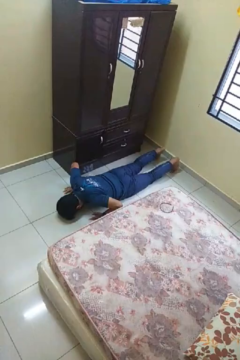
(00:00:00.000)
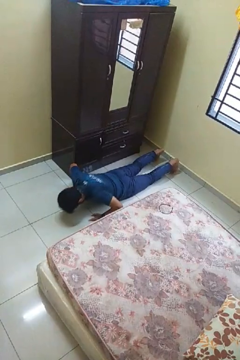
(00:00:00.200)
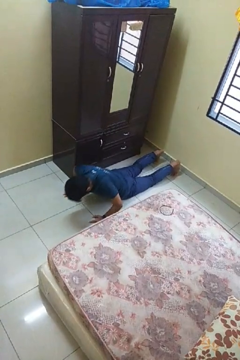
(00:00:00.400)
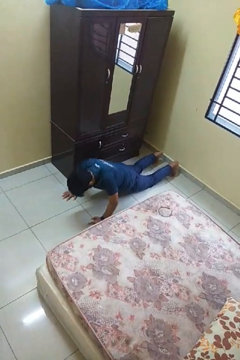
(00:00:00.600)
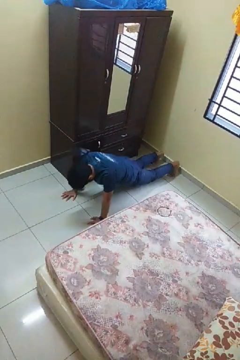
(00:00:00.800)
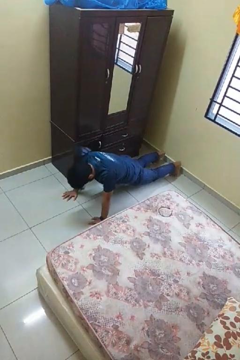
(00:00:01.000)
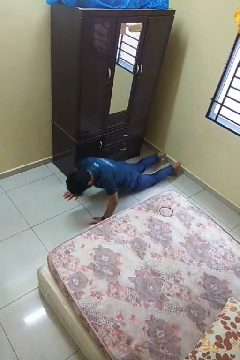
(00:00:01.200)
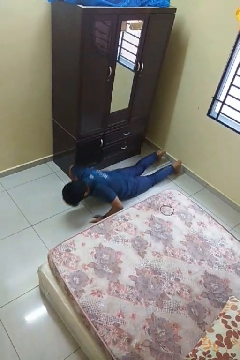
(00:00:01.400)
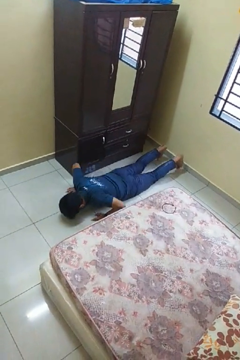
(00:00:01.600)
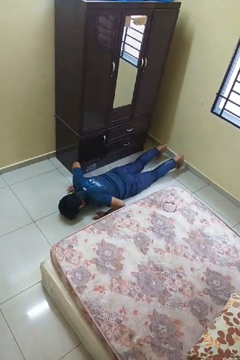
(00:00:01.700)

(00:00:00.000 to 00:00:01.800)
person exercises with pushup

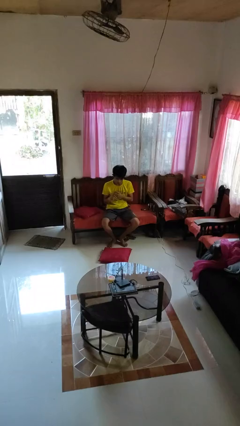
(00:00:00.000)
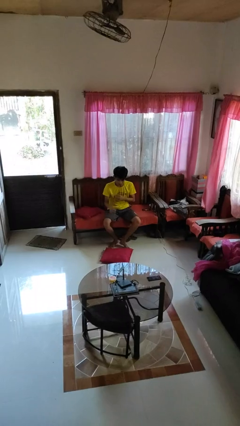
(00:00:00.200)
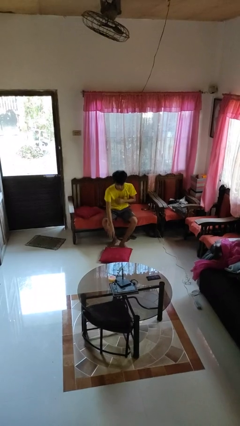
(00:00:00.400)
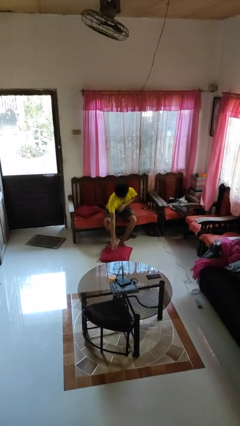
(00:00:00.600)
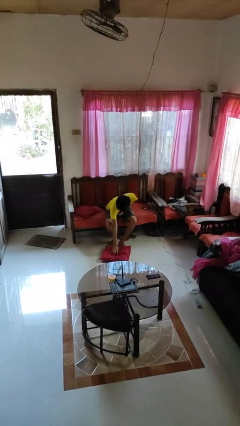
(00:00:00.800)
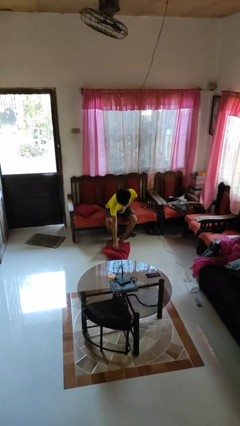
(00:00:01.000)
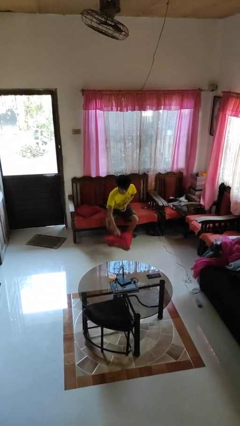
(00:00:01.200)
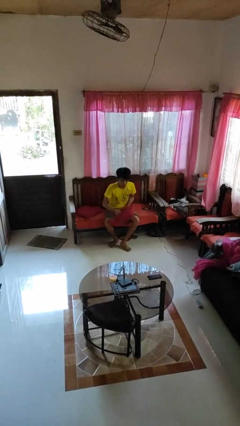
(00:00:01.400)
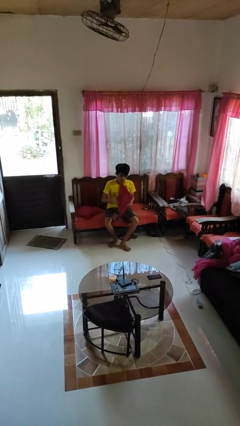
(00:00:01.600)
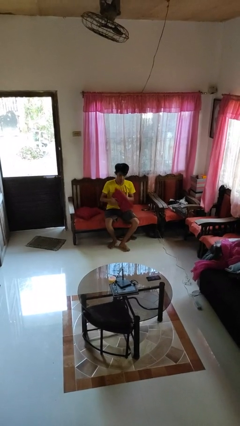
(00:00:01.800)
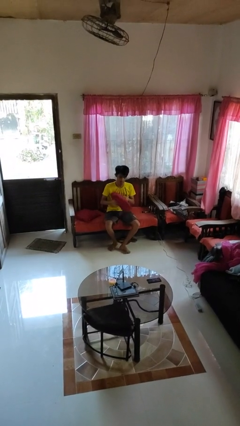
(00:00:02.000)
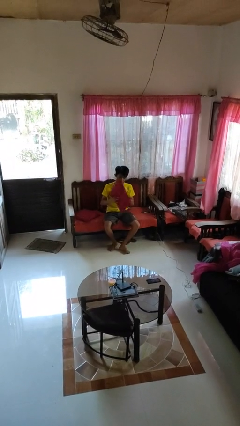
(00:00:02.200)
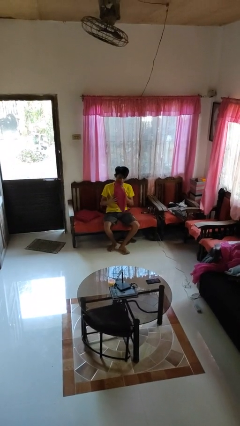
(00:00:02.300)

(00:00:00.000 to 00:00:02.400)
person picks up object from floor

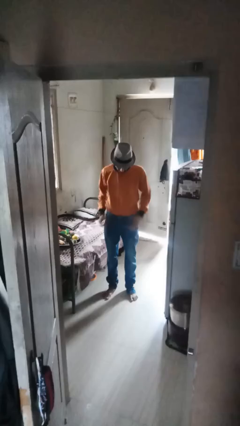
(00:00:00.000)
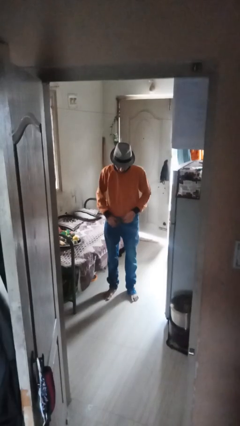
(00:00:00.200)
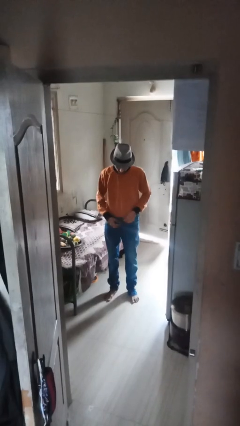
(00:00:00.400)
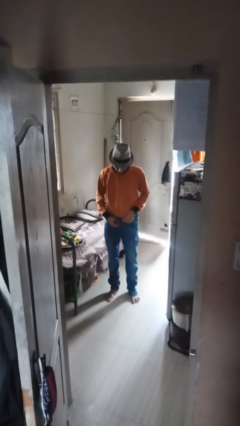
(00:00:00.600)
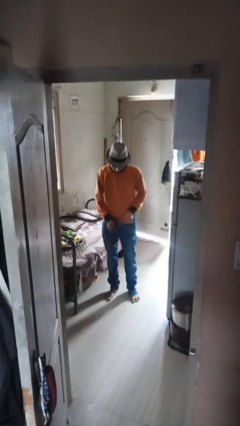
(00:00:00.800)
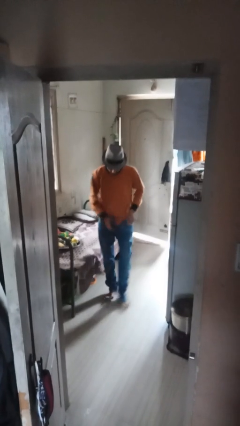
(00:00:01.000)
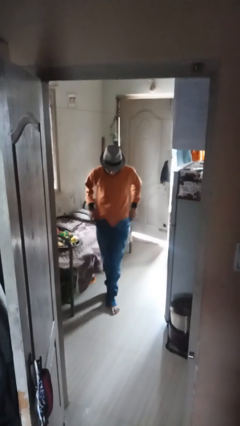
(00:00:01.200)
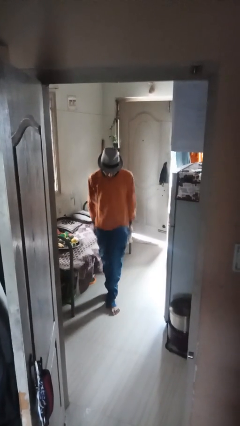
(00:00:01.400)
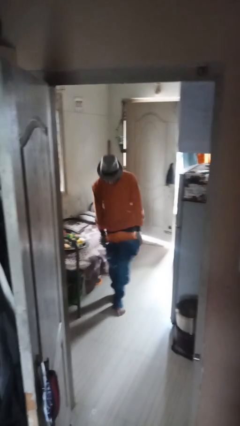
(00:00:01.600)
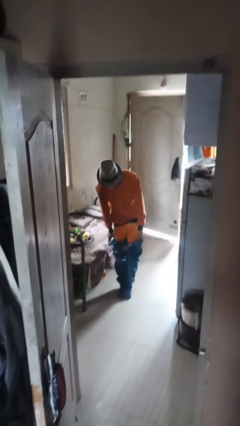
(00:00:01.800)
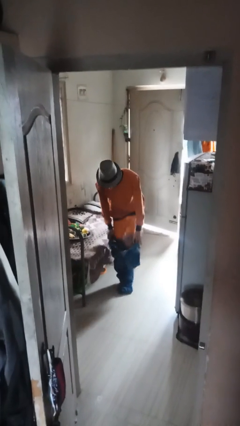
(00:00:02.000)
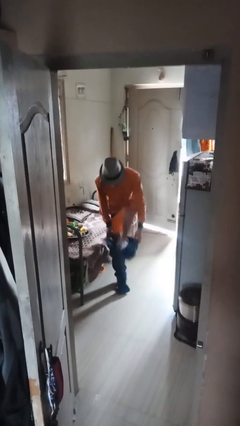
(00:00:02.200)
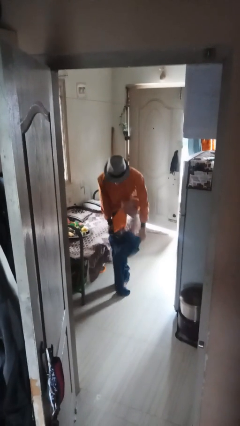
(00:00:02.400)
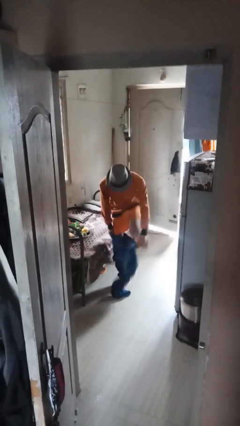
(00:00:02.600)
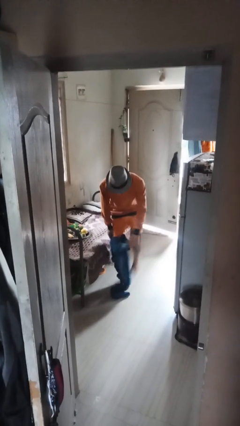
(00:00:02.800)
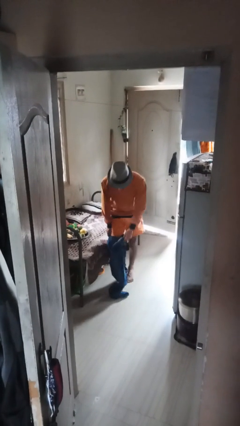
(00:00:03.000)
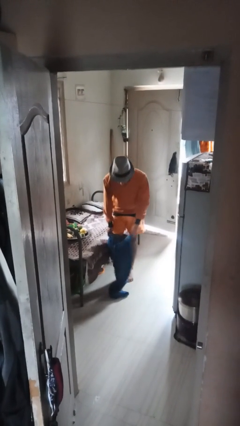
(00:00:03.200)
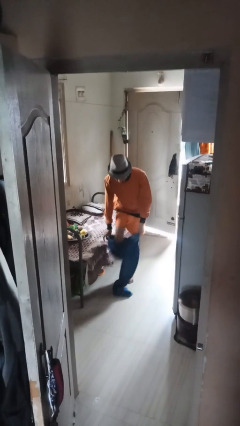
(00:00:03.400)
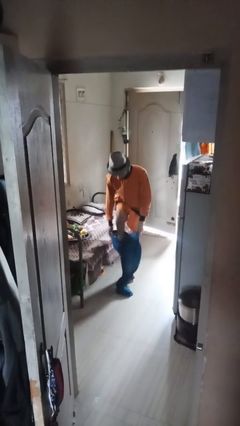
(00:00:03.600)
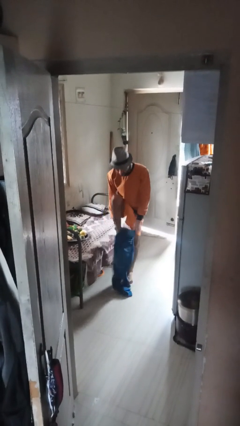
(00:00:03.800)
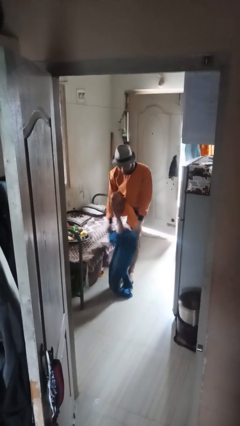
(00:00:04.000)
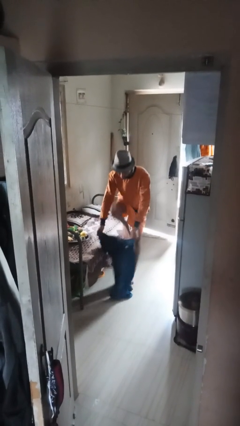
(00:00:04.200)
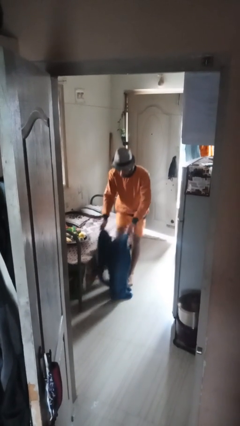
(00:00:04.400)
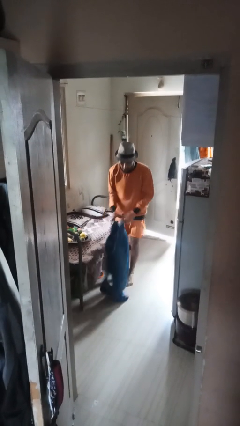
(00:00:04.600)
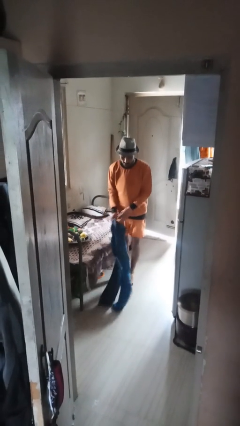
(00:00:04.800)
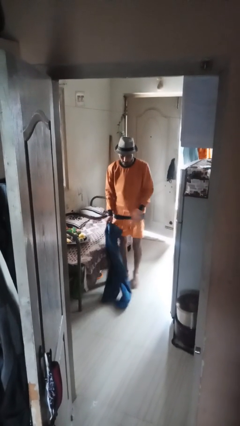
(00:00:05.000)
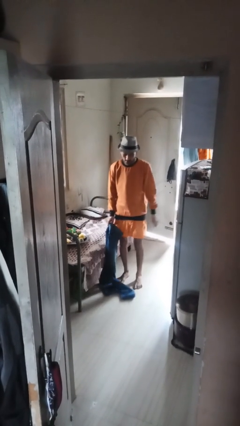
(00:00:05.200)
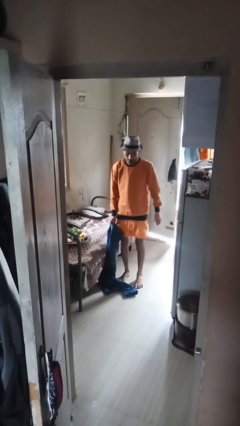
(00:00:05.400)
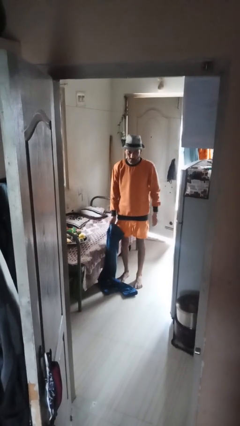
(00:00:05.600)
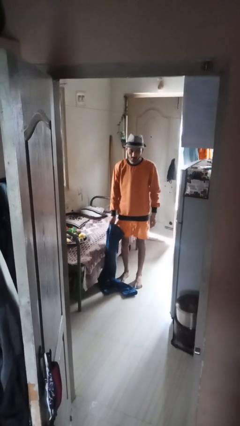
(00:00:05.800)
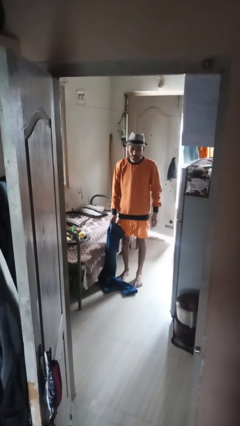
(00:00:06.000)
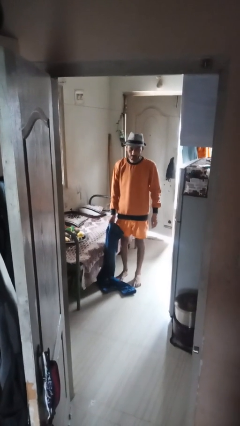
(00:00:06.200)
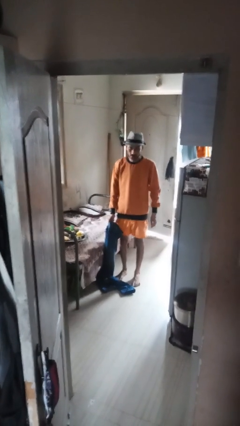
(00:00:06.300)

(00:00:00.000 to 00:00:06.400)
person takes off pants

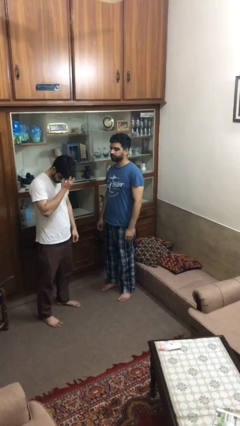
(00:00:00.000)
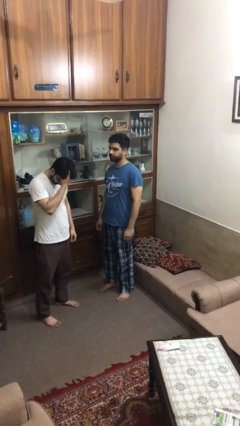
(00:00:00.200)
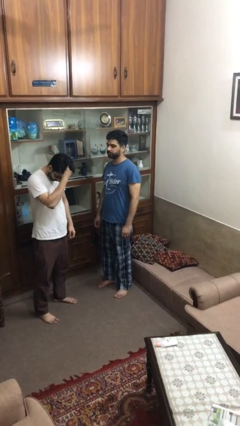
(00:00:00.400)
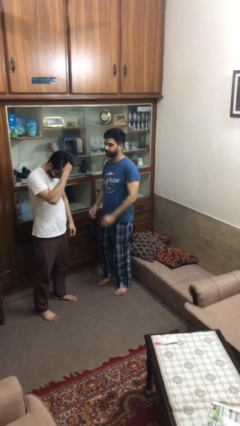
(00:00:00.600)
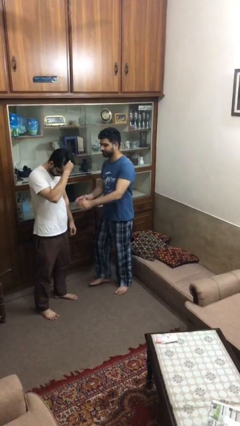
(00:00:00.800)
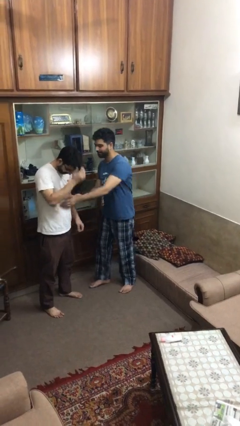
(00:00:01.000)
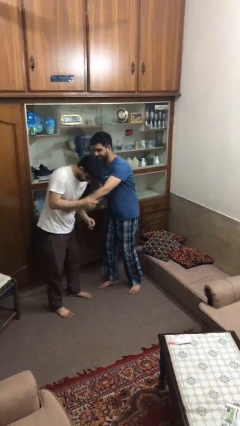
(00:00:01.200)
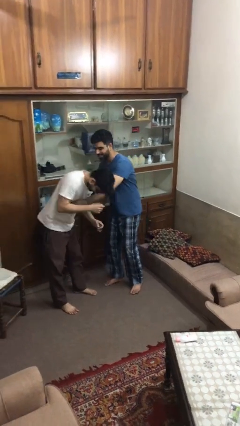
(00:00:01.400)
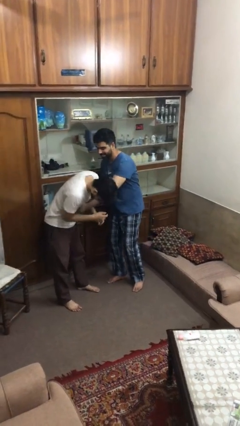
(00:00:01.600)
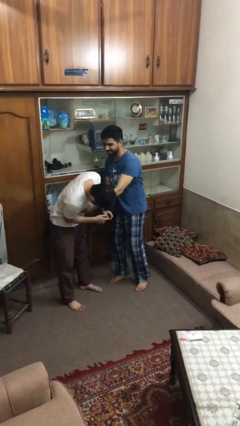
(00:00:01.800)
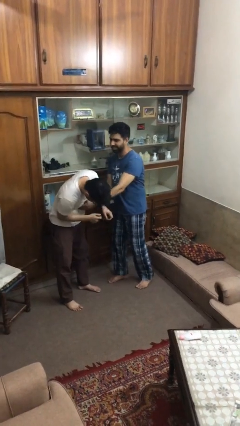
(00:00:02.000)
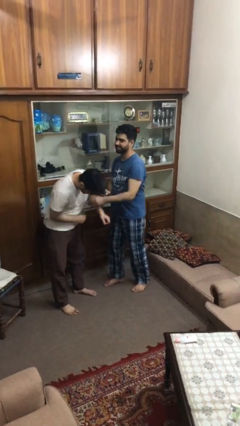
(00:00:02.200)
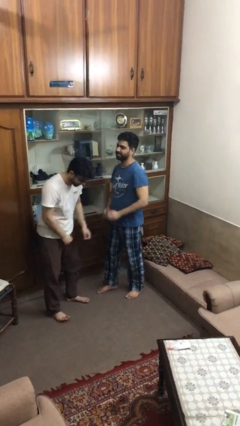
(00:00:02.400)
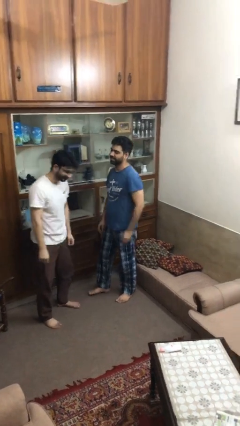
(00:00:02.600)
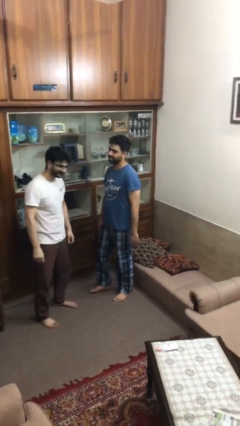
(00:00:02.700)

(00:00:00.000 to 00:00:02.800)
person tickles person

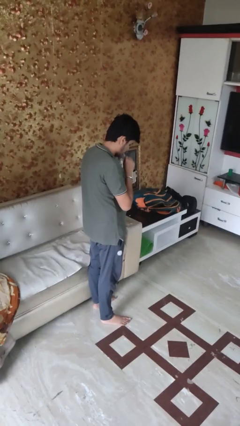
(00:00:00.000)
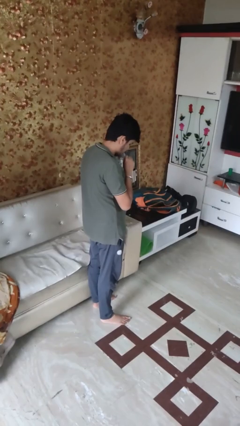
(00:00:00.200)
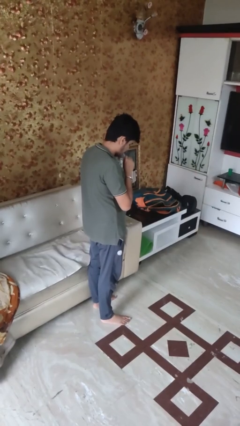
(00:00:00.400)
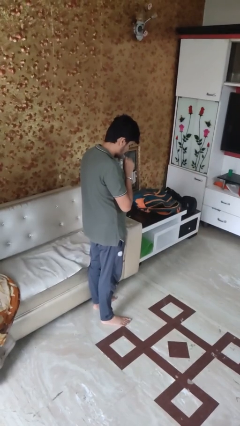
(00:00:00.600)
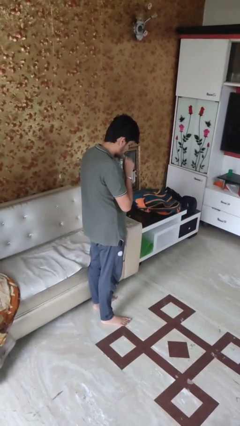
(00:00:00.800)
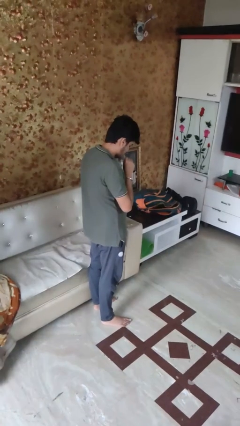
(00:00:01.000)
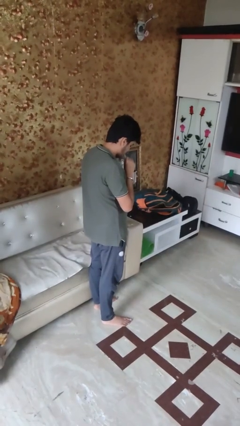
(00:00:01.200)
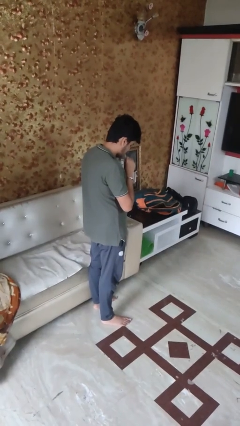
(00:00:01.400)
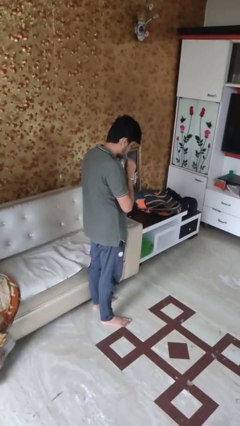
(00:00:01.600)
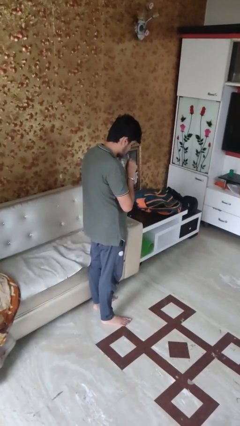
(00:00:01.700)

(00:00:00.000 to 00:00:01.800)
person drinks from straw

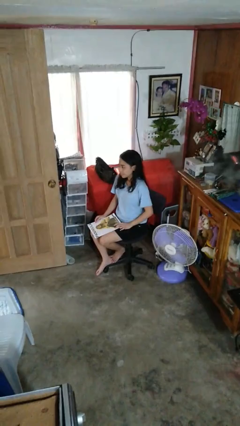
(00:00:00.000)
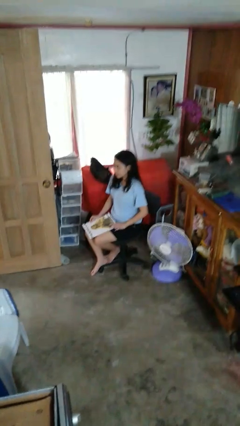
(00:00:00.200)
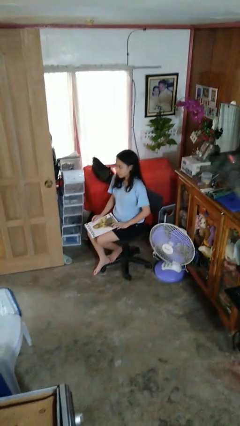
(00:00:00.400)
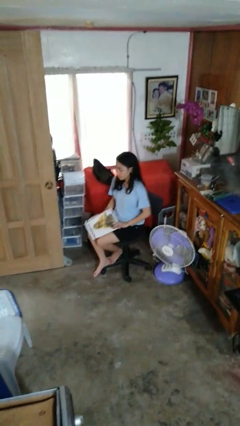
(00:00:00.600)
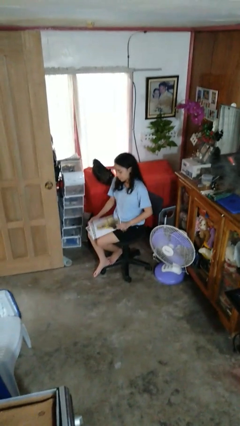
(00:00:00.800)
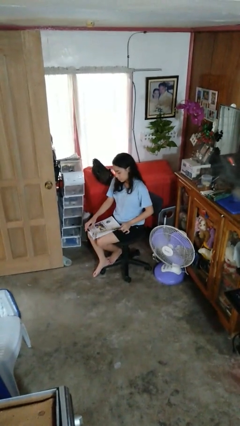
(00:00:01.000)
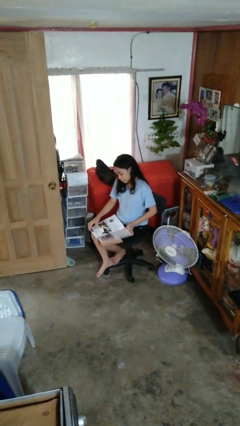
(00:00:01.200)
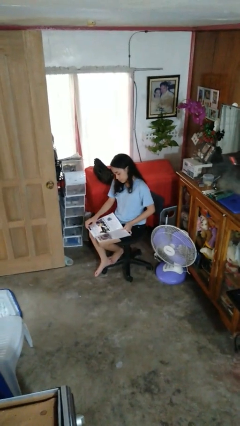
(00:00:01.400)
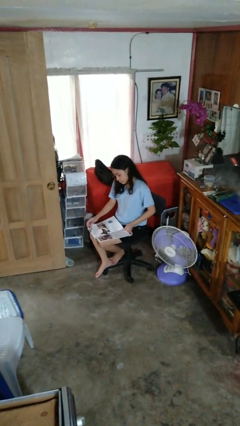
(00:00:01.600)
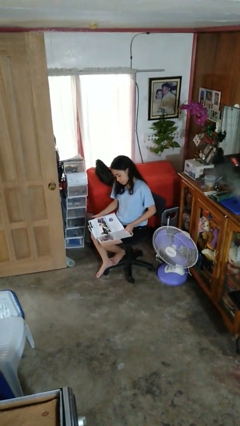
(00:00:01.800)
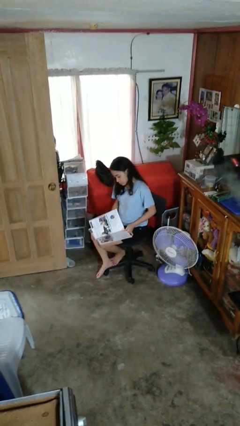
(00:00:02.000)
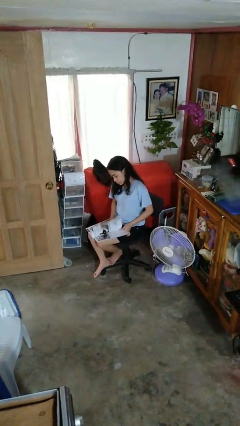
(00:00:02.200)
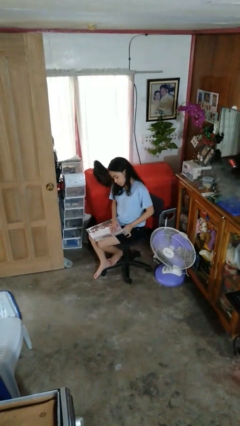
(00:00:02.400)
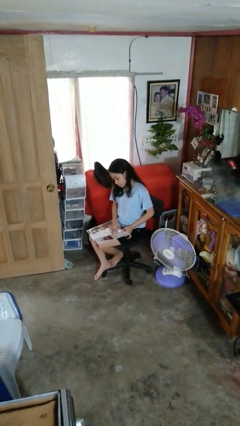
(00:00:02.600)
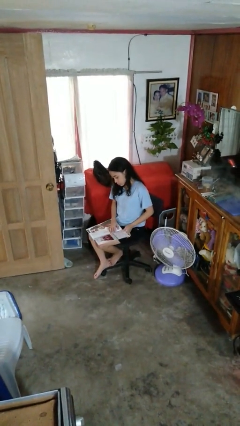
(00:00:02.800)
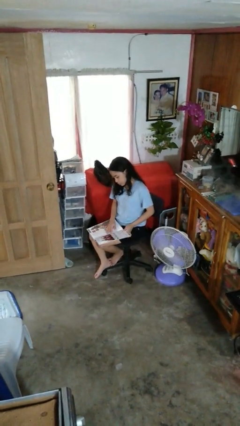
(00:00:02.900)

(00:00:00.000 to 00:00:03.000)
person reads magazine
